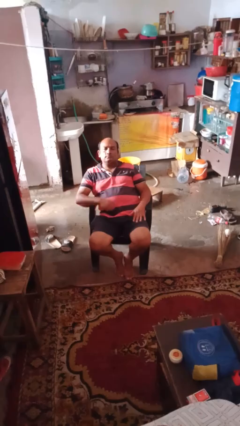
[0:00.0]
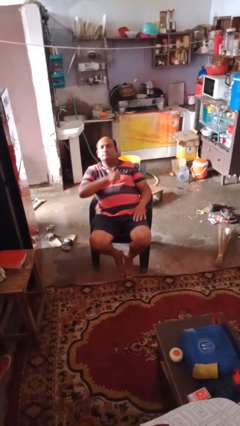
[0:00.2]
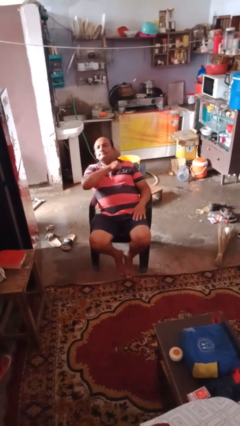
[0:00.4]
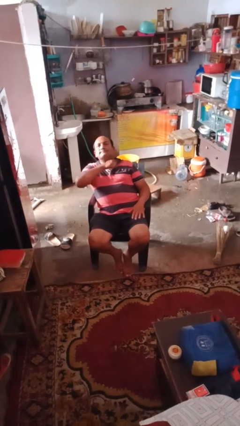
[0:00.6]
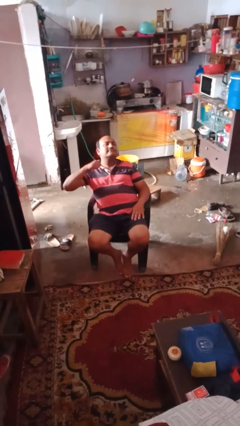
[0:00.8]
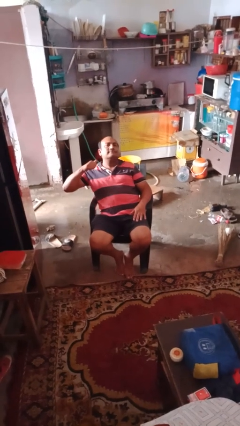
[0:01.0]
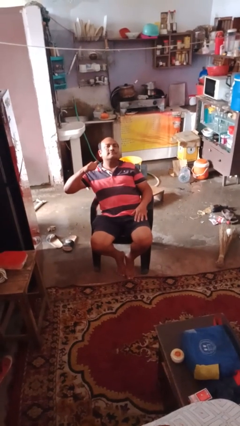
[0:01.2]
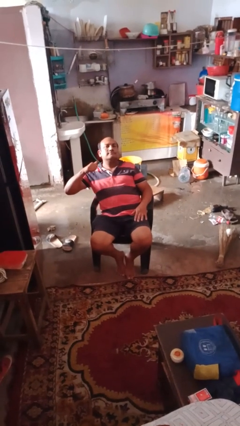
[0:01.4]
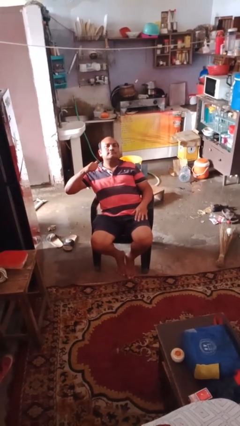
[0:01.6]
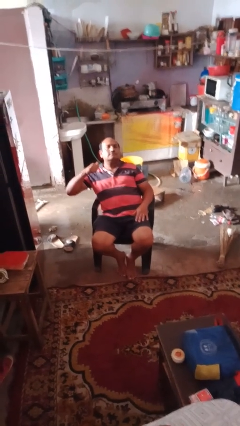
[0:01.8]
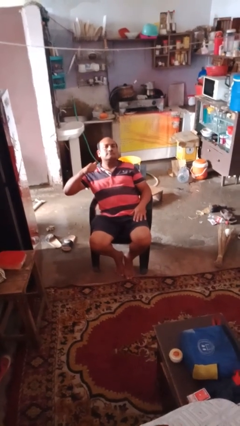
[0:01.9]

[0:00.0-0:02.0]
person gestures cut

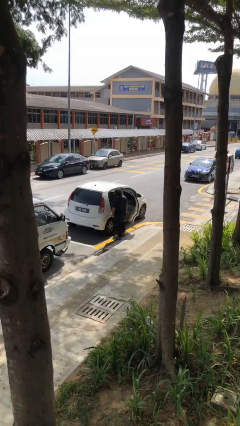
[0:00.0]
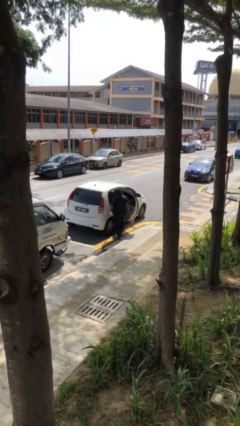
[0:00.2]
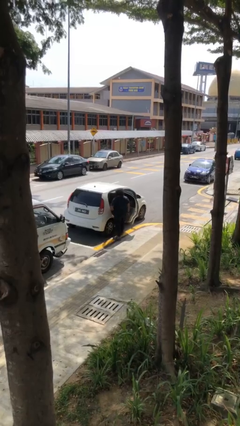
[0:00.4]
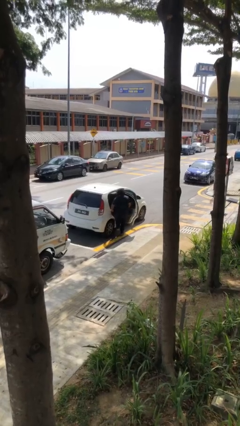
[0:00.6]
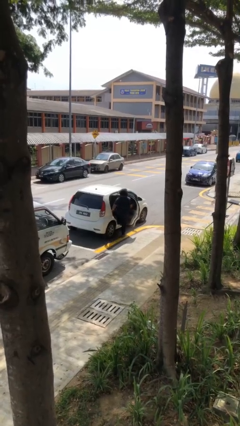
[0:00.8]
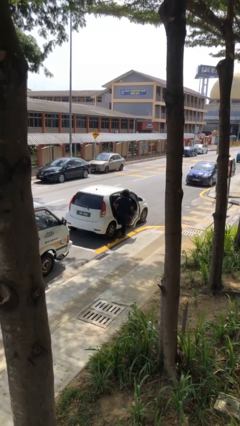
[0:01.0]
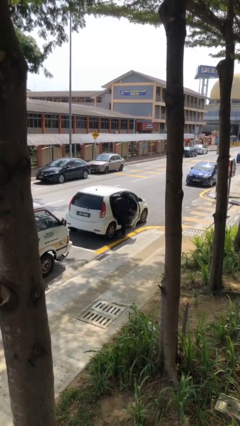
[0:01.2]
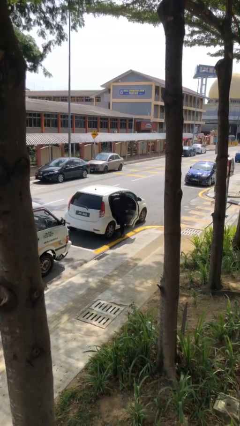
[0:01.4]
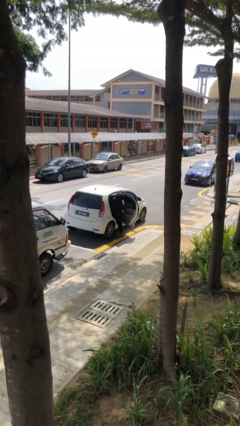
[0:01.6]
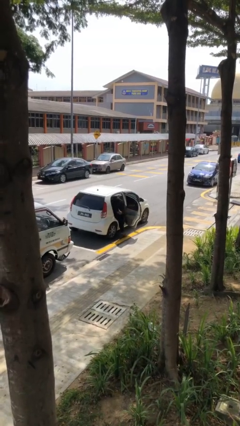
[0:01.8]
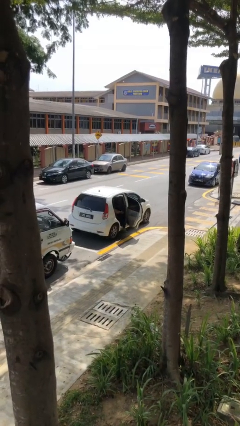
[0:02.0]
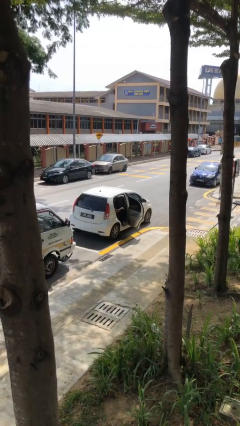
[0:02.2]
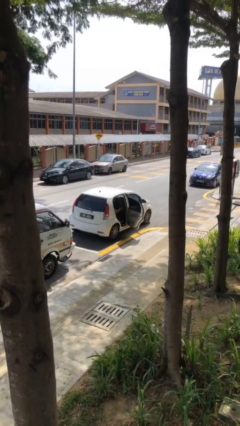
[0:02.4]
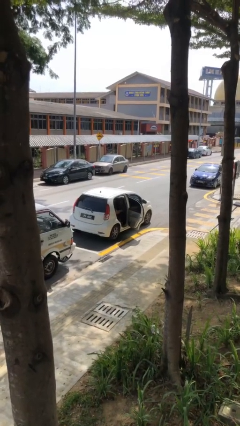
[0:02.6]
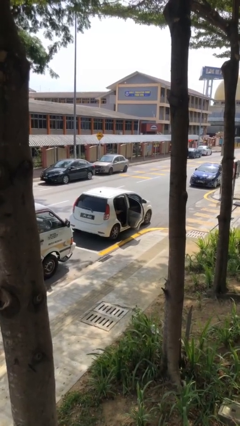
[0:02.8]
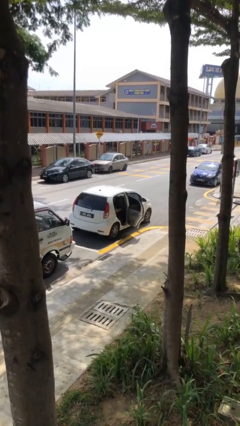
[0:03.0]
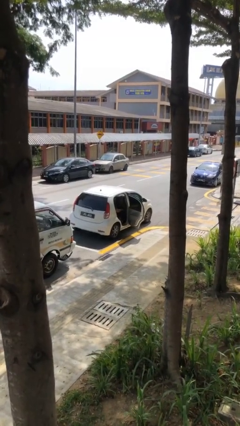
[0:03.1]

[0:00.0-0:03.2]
person enters car

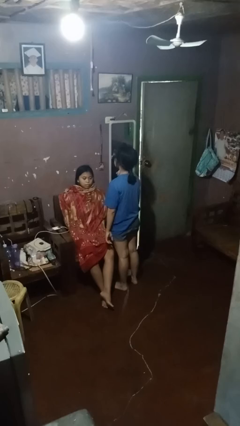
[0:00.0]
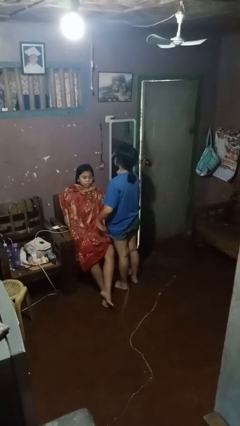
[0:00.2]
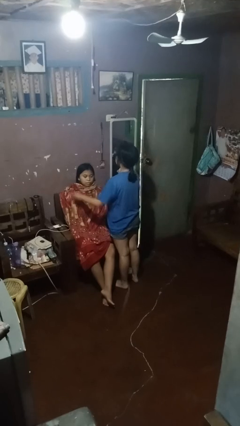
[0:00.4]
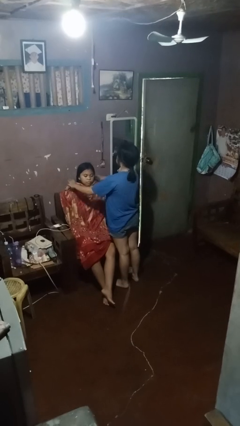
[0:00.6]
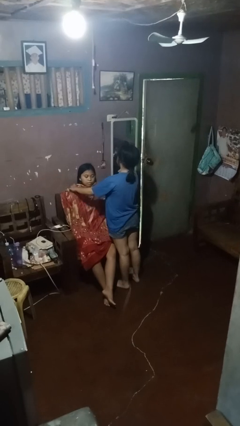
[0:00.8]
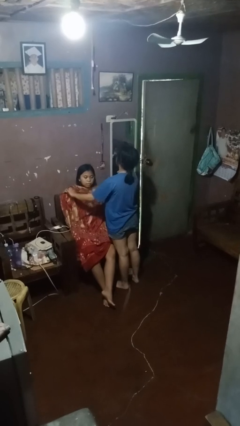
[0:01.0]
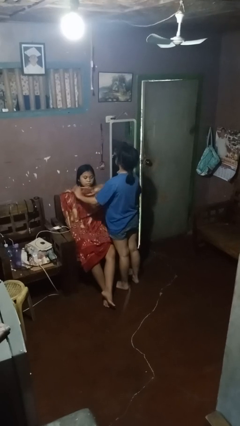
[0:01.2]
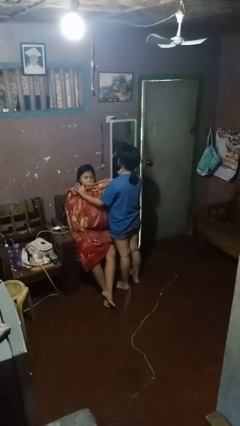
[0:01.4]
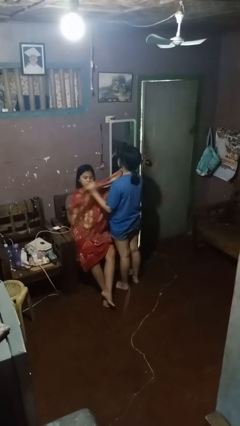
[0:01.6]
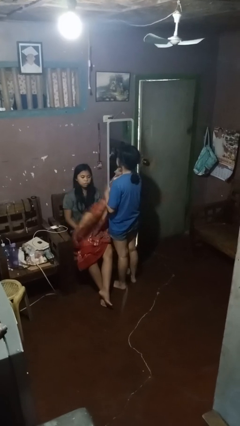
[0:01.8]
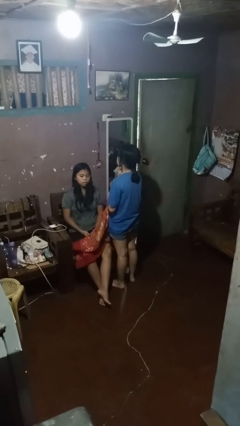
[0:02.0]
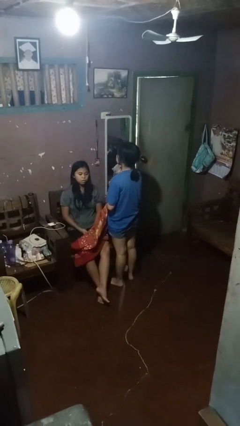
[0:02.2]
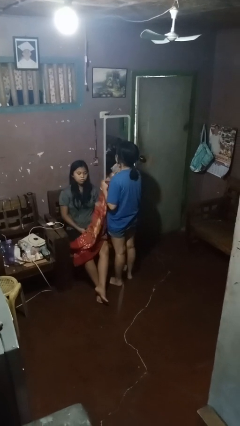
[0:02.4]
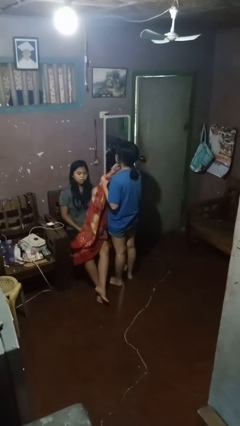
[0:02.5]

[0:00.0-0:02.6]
person uncovers friend with blanket

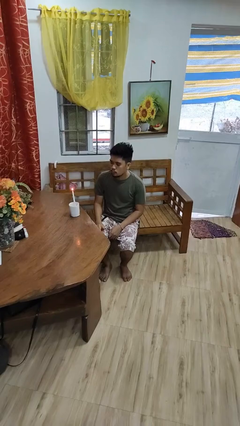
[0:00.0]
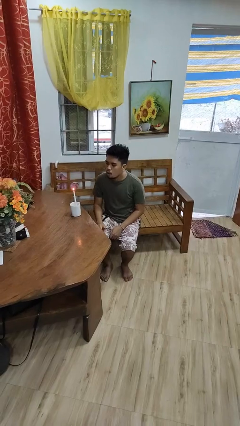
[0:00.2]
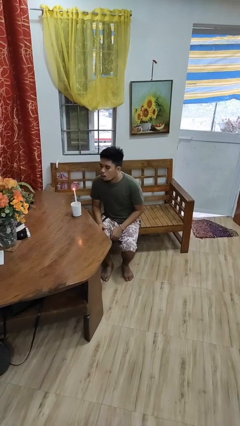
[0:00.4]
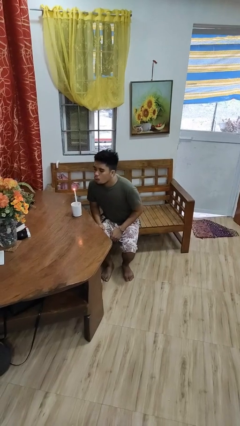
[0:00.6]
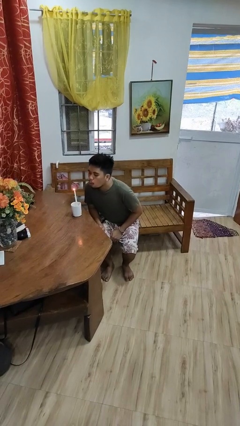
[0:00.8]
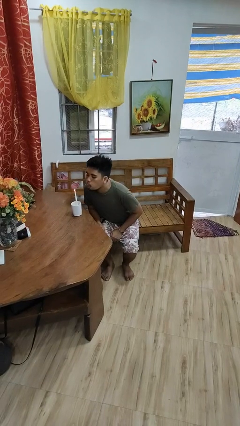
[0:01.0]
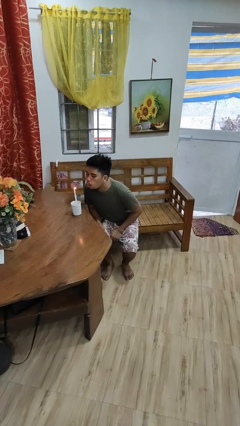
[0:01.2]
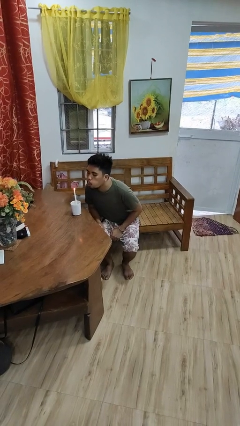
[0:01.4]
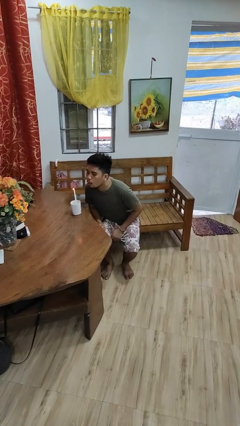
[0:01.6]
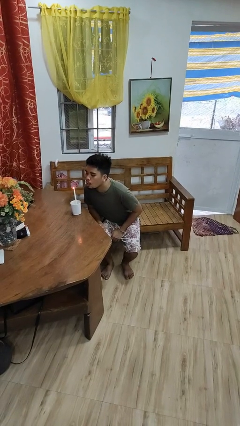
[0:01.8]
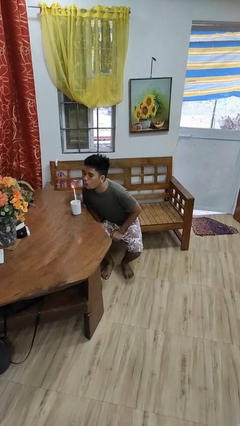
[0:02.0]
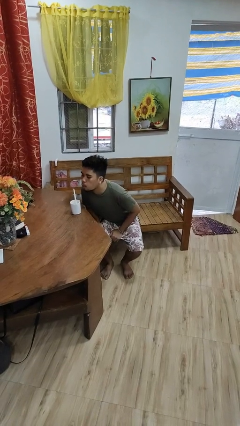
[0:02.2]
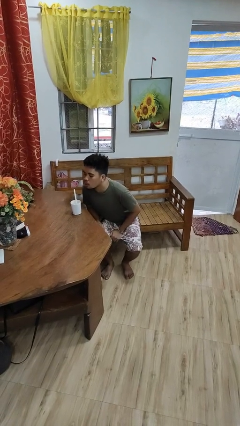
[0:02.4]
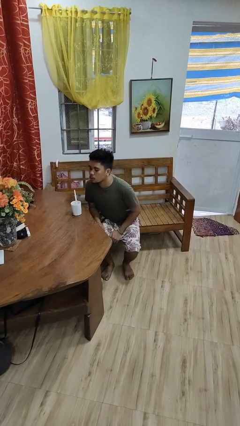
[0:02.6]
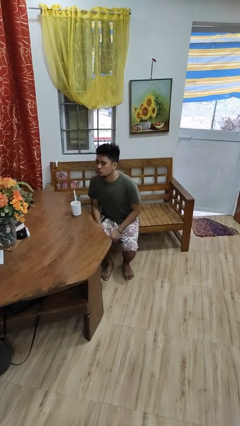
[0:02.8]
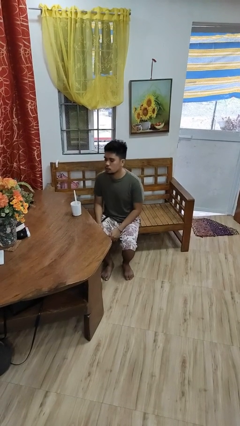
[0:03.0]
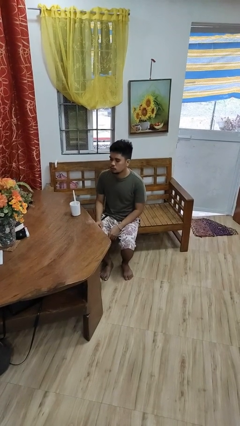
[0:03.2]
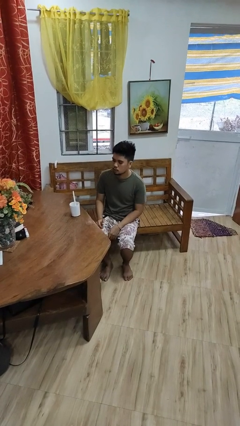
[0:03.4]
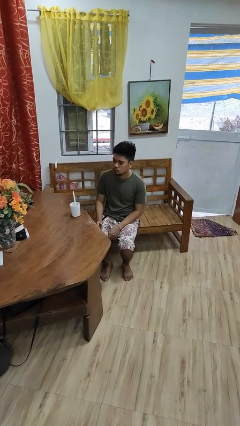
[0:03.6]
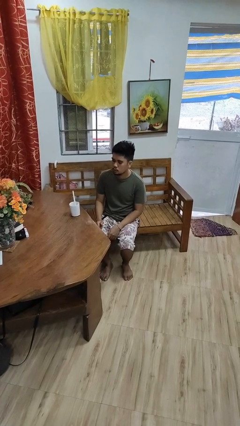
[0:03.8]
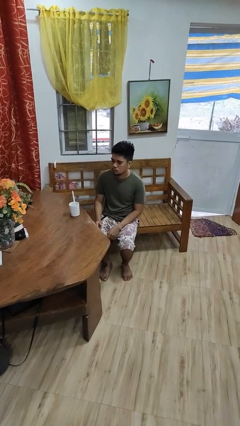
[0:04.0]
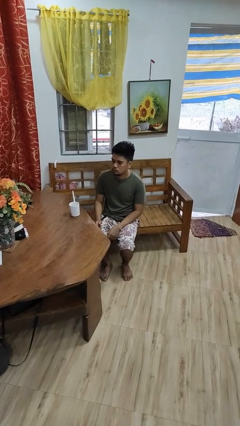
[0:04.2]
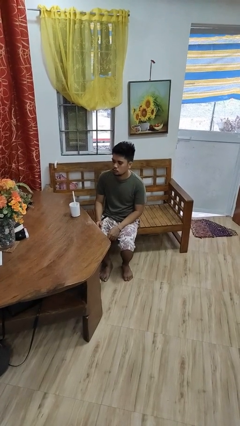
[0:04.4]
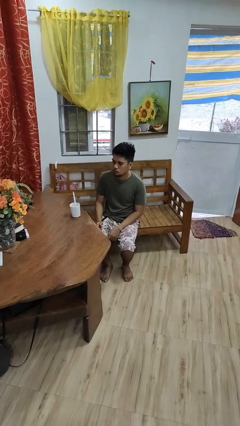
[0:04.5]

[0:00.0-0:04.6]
person extinguishes candle

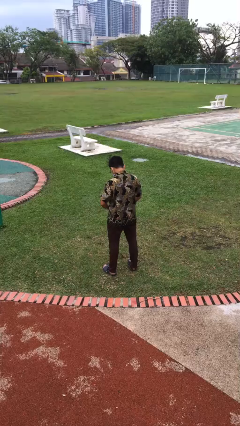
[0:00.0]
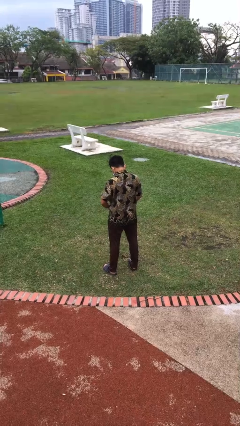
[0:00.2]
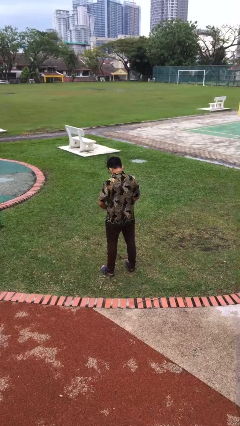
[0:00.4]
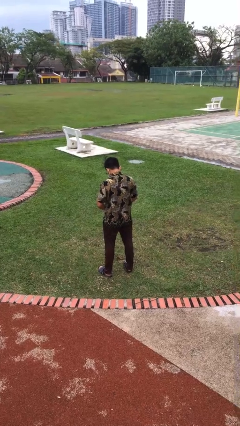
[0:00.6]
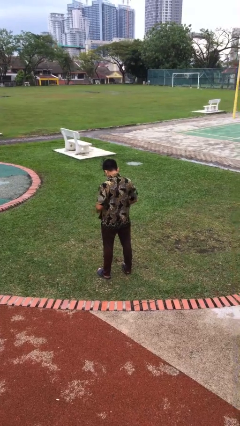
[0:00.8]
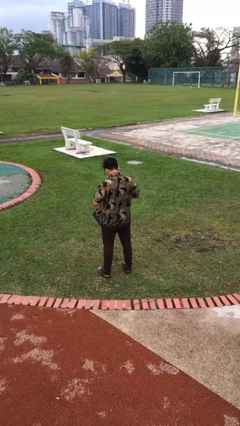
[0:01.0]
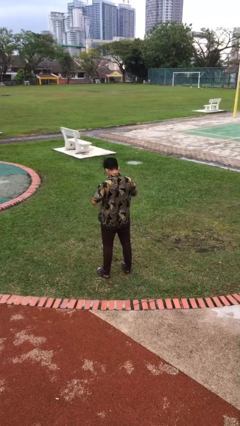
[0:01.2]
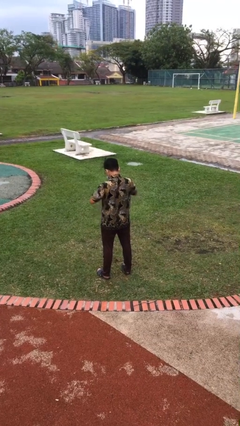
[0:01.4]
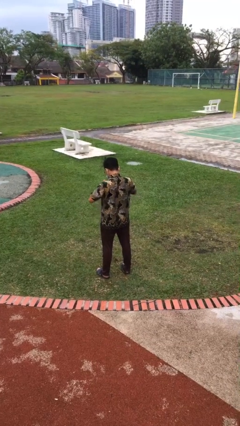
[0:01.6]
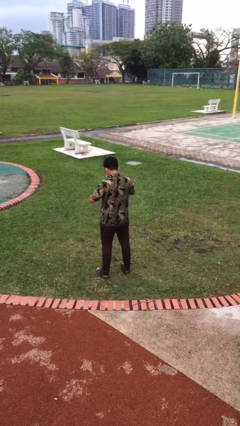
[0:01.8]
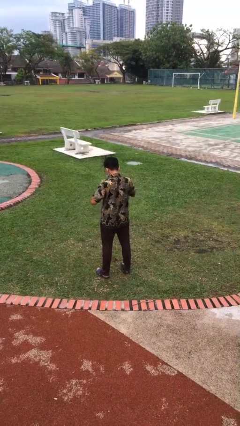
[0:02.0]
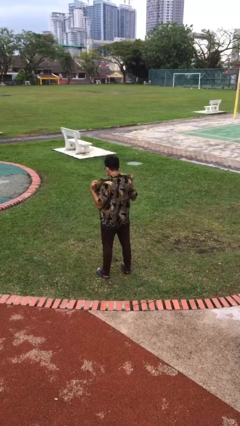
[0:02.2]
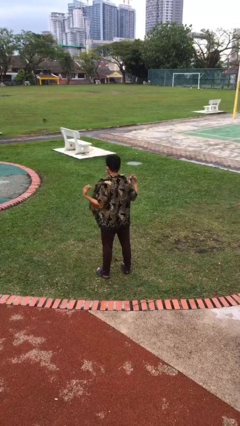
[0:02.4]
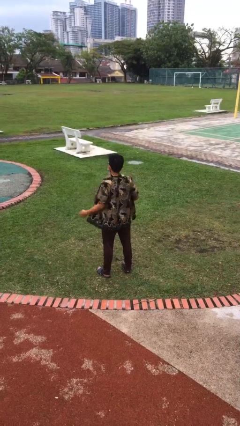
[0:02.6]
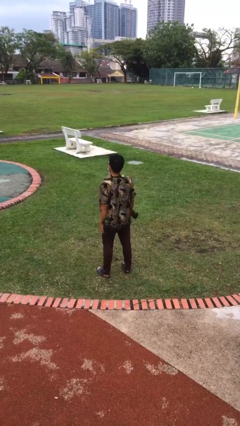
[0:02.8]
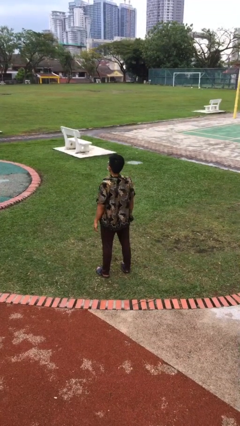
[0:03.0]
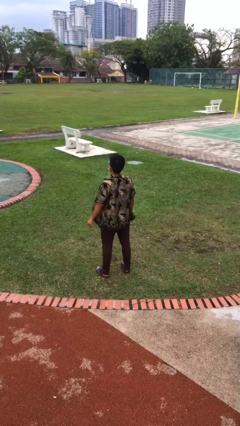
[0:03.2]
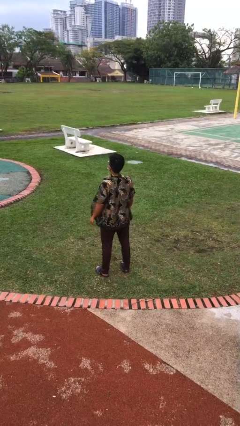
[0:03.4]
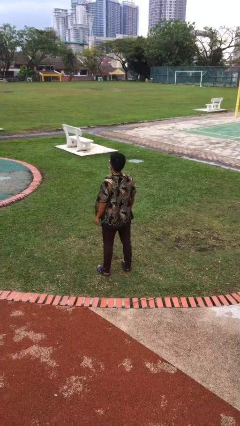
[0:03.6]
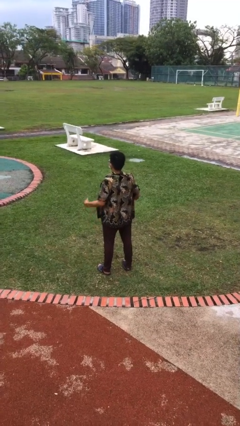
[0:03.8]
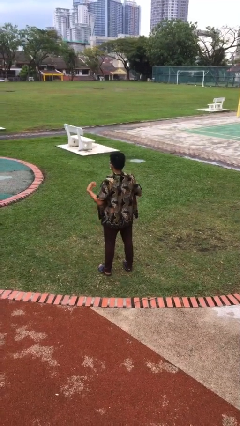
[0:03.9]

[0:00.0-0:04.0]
person unbuttons shirt

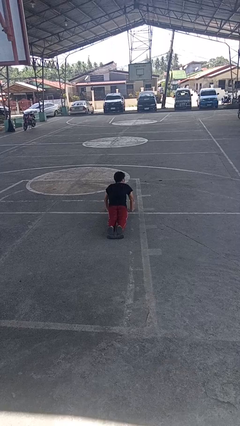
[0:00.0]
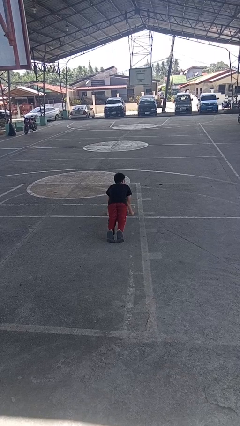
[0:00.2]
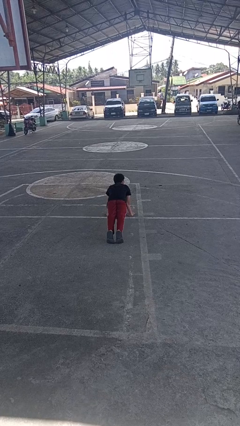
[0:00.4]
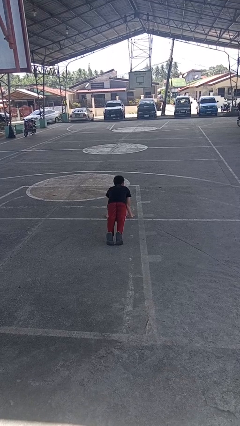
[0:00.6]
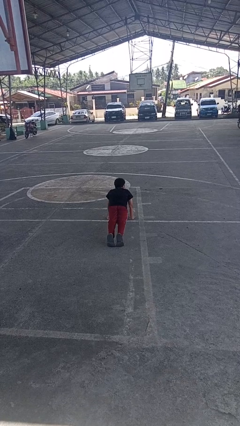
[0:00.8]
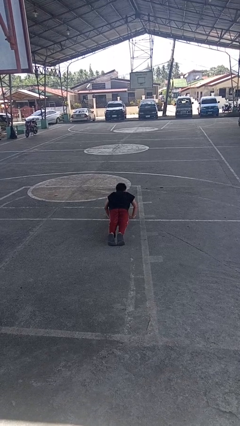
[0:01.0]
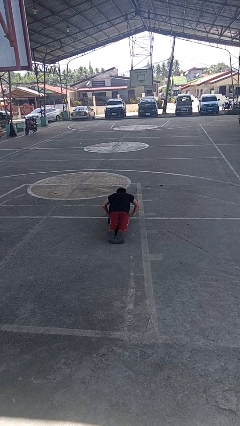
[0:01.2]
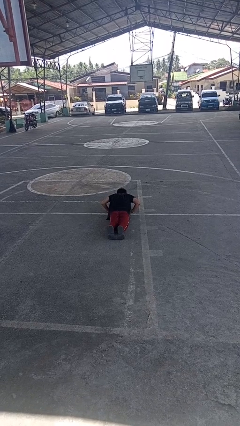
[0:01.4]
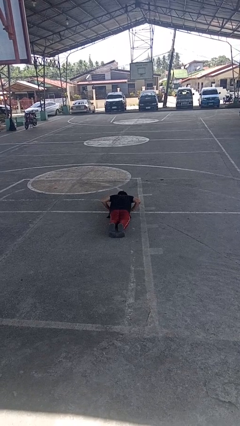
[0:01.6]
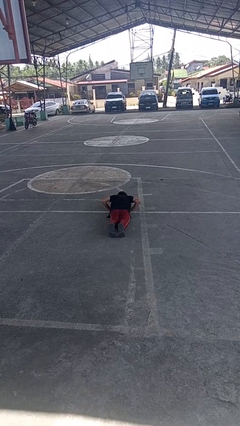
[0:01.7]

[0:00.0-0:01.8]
person exercises with pushup
